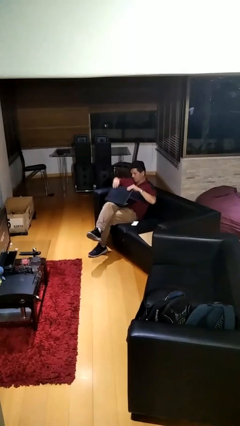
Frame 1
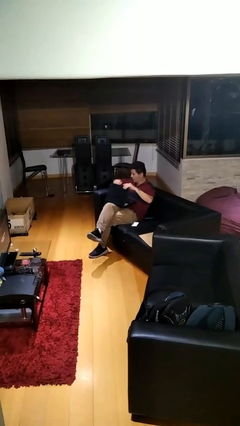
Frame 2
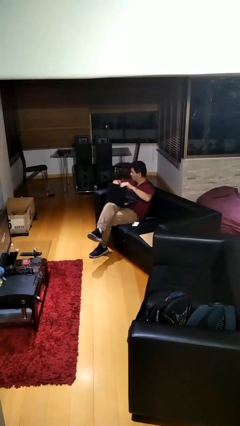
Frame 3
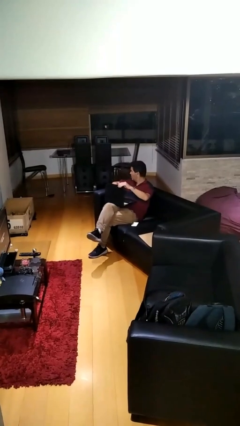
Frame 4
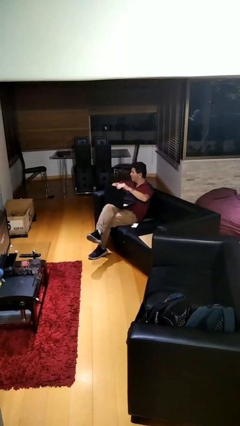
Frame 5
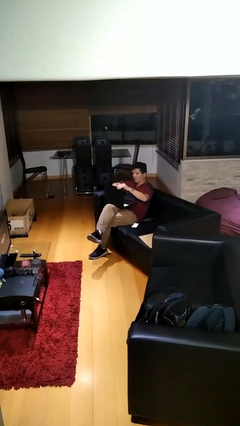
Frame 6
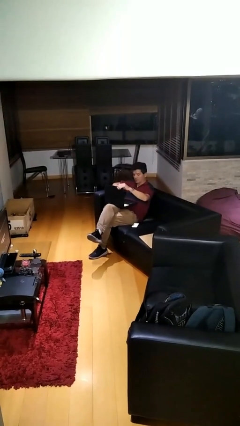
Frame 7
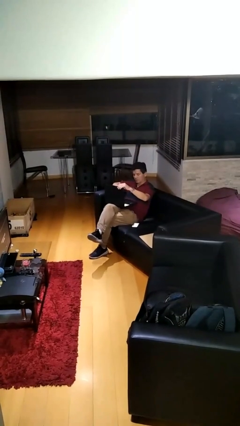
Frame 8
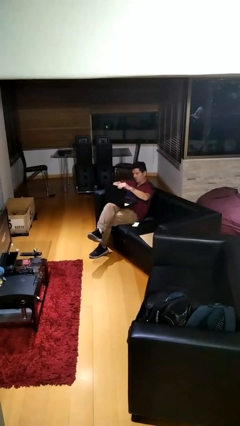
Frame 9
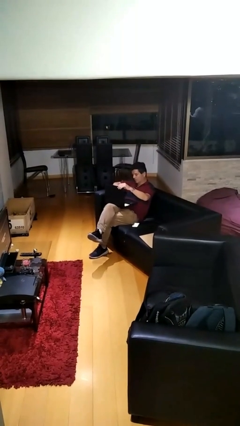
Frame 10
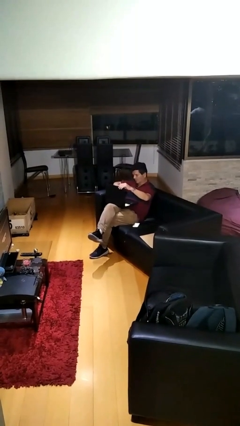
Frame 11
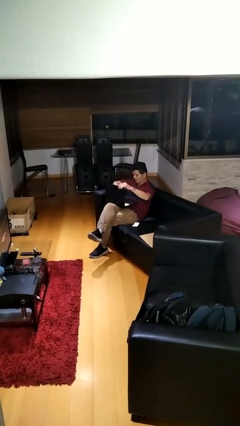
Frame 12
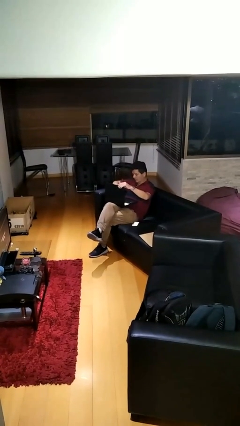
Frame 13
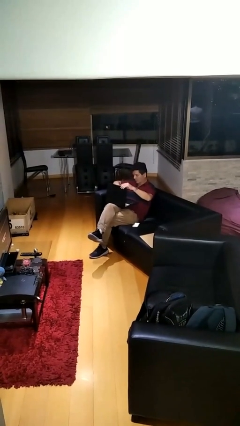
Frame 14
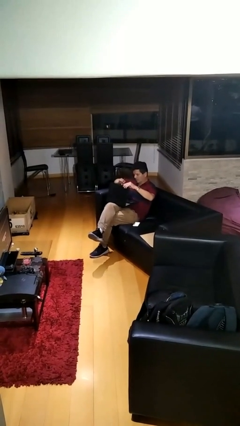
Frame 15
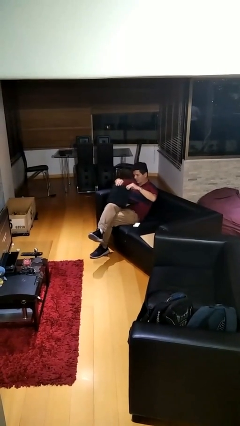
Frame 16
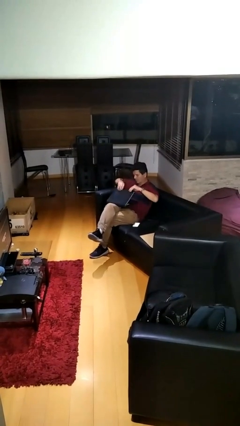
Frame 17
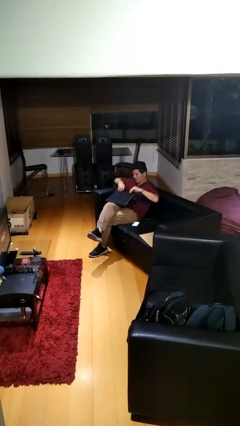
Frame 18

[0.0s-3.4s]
person interacts with laptop

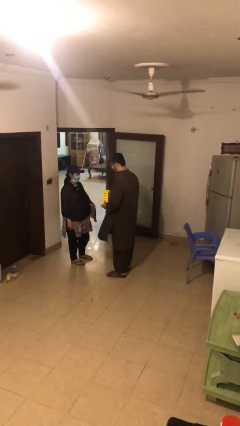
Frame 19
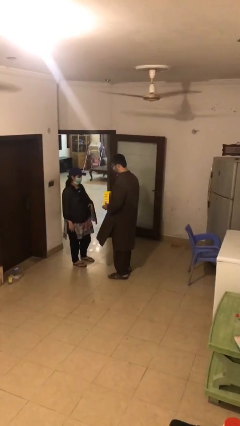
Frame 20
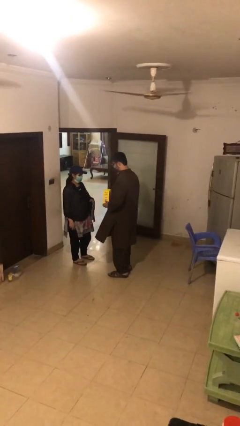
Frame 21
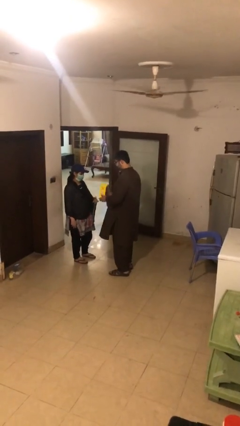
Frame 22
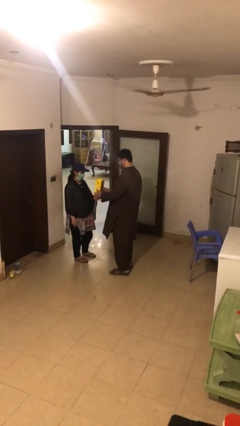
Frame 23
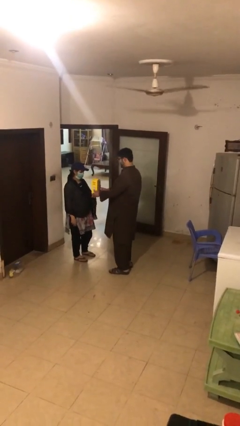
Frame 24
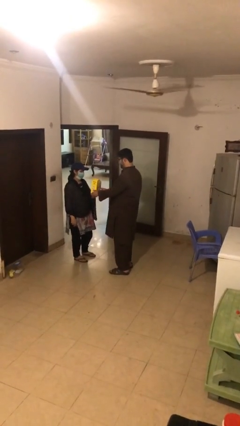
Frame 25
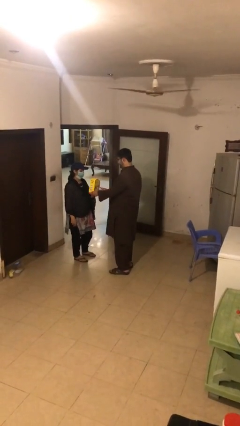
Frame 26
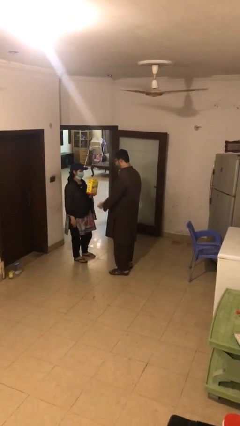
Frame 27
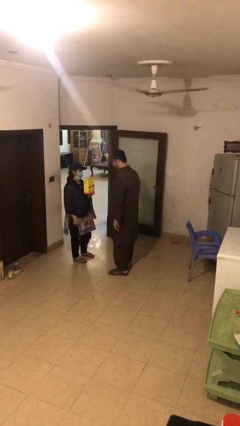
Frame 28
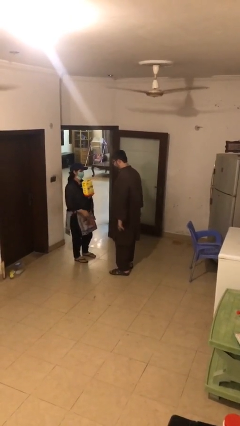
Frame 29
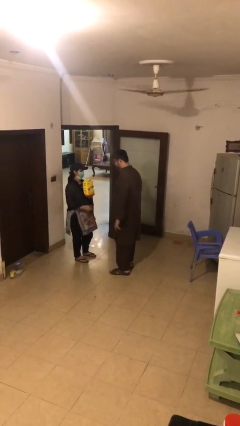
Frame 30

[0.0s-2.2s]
person transfers object to person

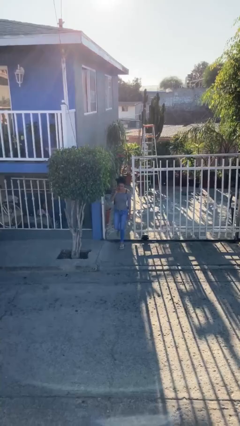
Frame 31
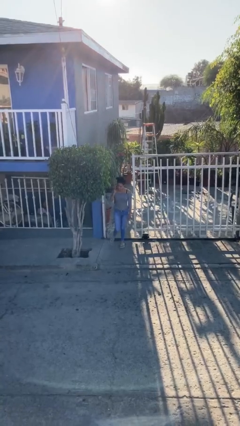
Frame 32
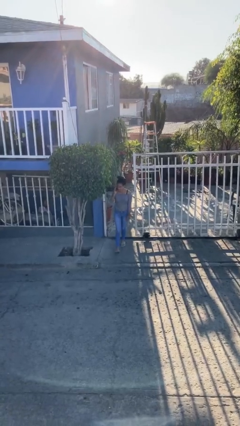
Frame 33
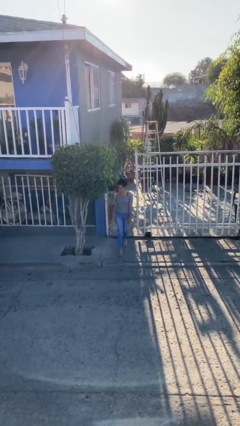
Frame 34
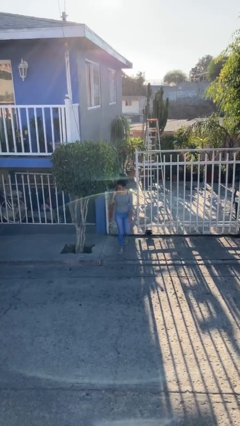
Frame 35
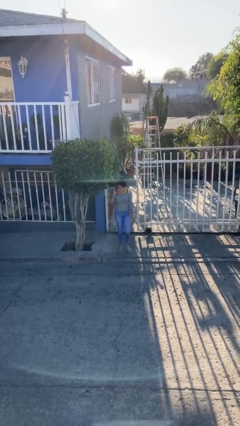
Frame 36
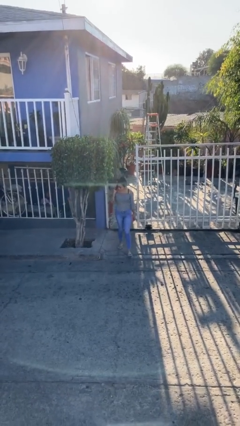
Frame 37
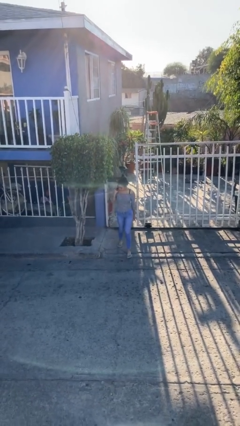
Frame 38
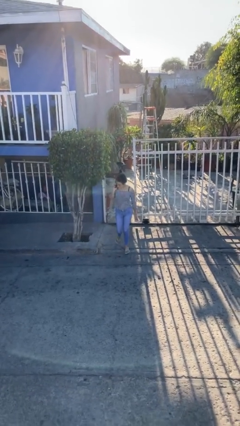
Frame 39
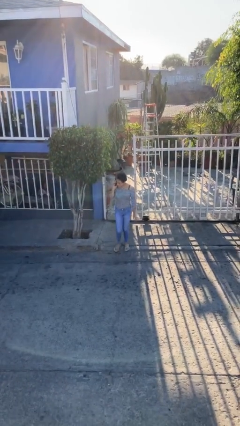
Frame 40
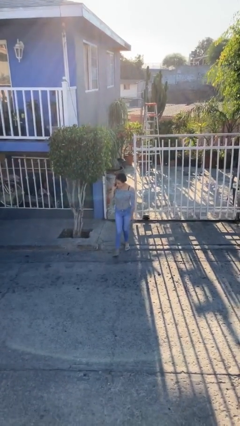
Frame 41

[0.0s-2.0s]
person enters scene through structure

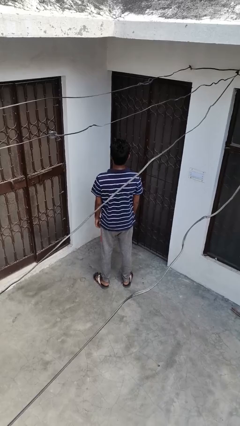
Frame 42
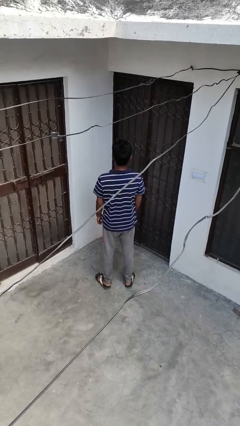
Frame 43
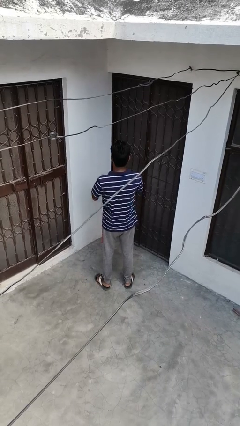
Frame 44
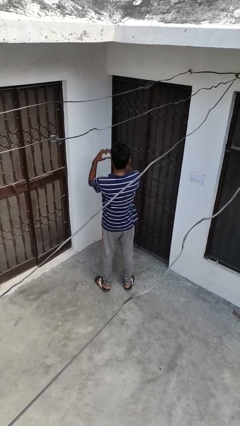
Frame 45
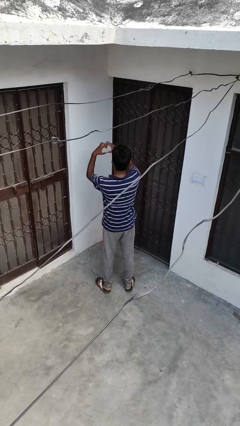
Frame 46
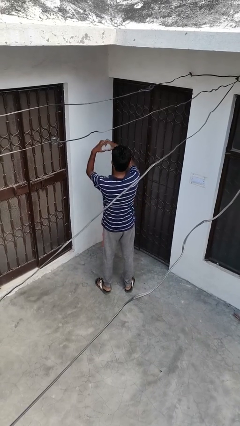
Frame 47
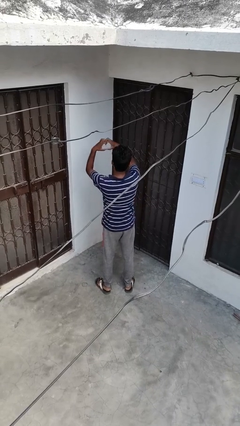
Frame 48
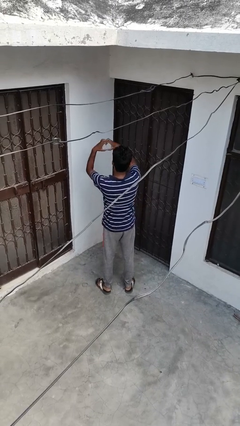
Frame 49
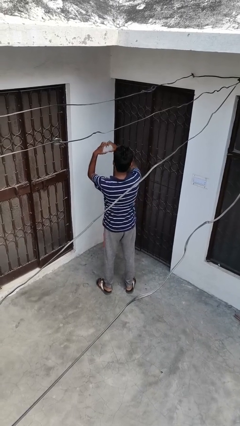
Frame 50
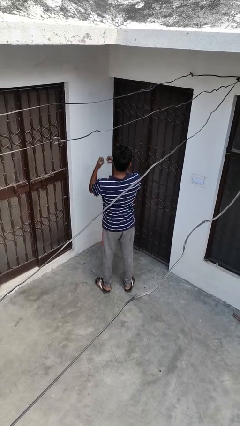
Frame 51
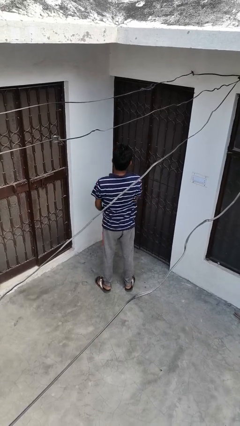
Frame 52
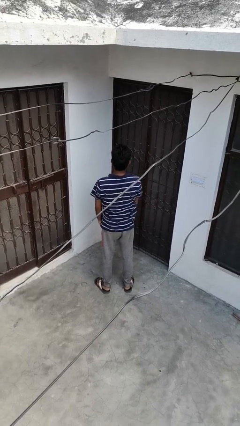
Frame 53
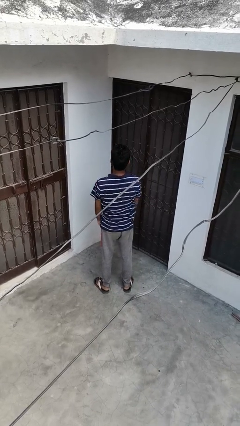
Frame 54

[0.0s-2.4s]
person gestures heart

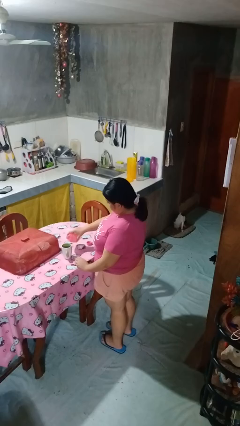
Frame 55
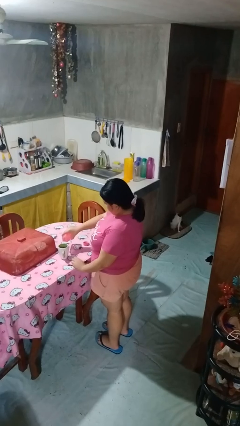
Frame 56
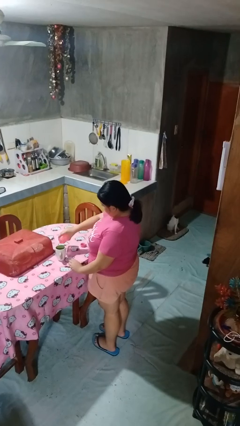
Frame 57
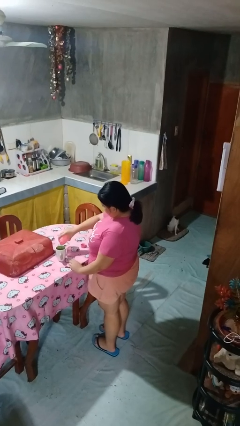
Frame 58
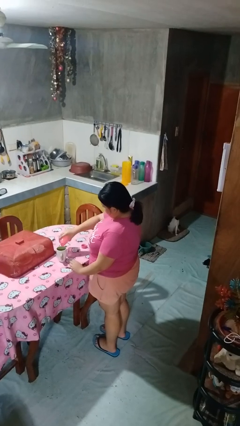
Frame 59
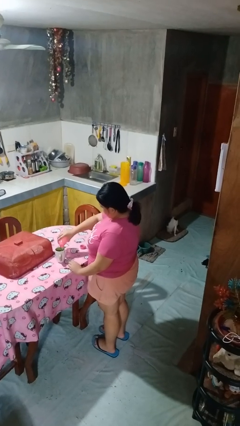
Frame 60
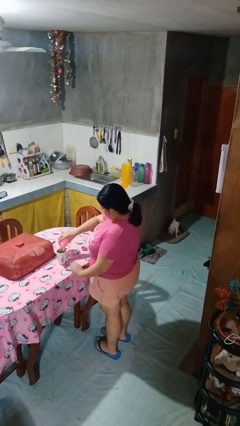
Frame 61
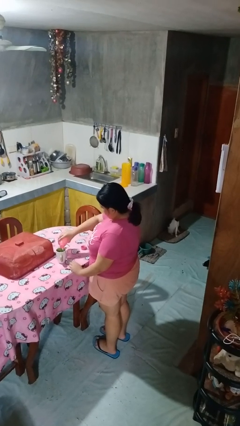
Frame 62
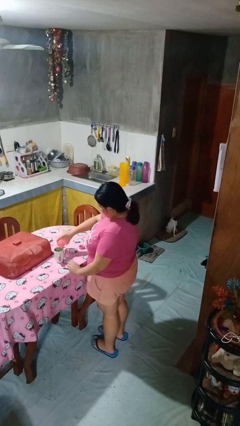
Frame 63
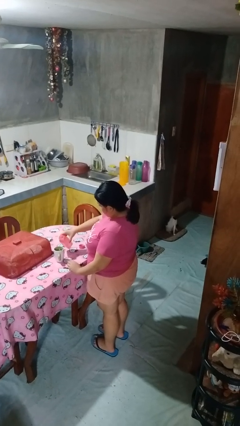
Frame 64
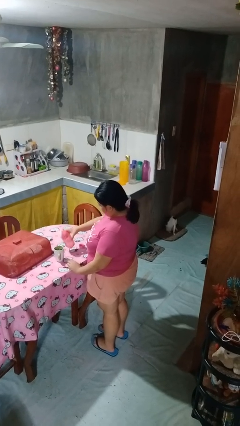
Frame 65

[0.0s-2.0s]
person pours liquid into cup

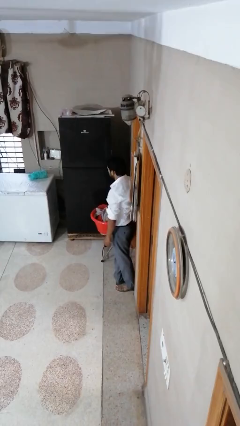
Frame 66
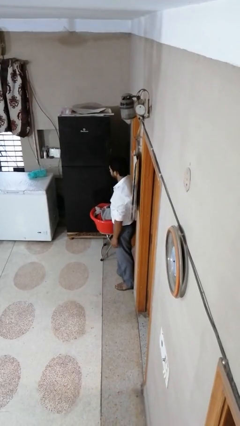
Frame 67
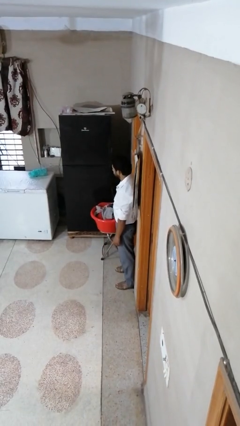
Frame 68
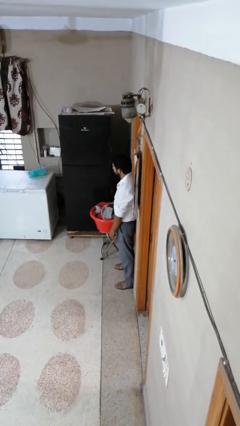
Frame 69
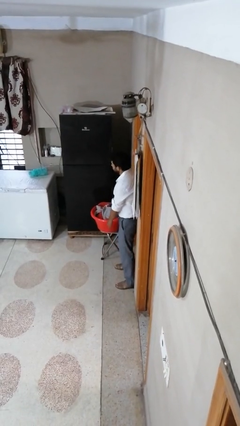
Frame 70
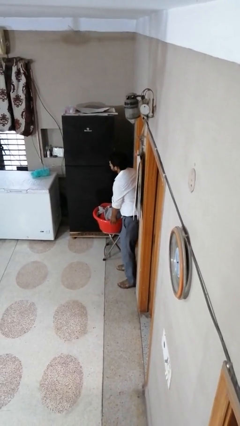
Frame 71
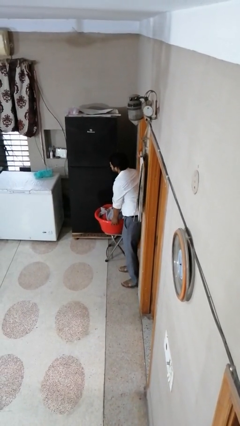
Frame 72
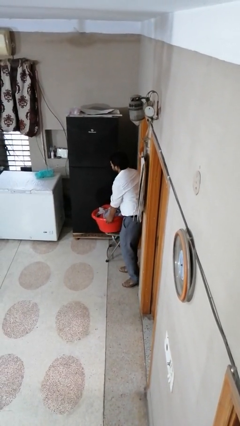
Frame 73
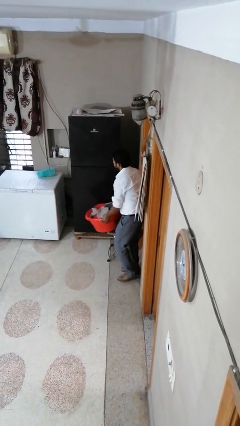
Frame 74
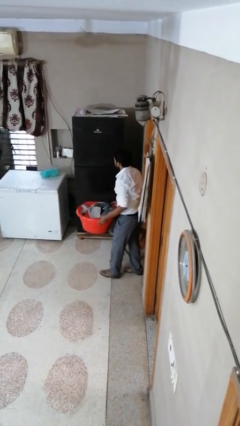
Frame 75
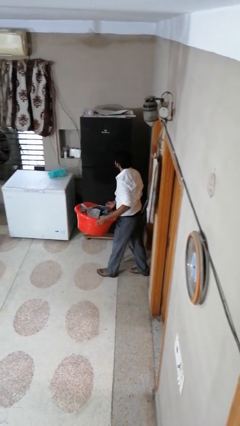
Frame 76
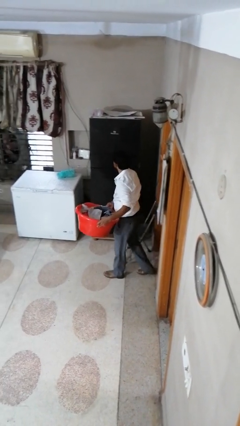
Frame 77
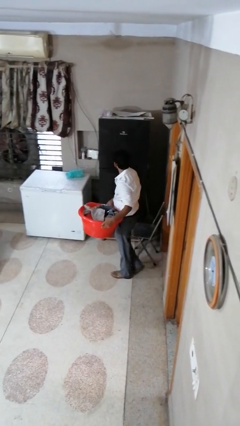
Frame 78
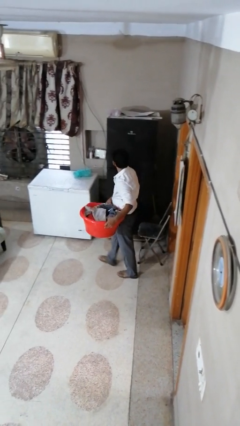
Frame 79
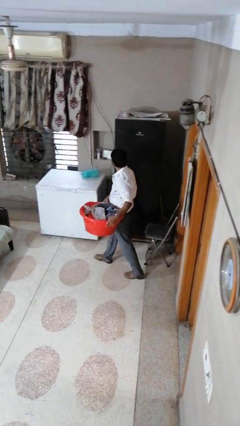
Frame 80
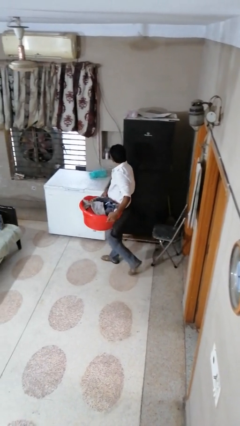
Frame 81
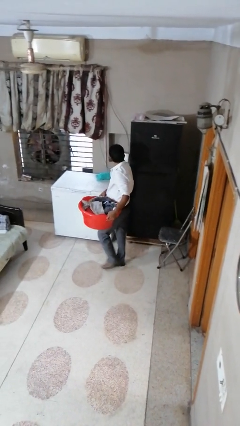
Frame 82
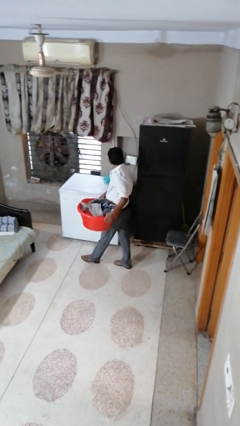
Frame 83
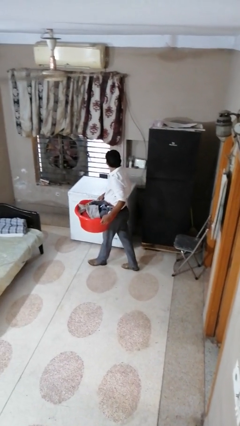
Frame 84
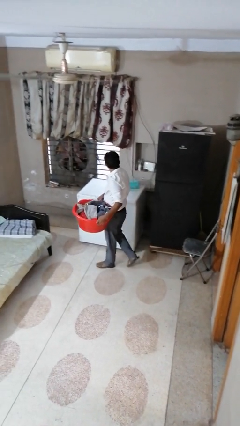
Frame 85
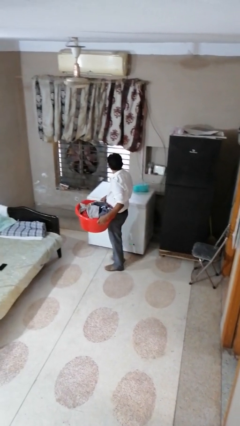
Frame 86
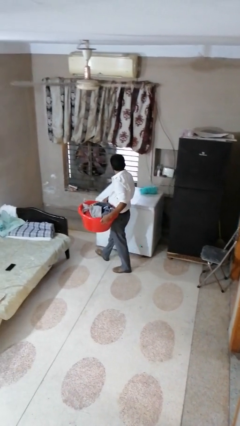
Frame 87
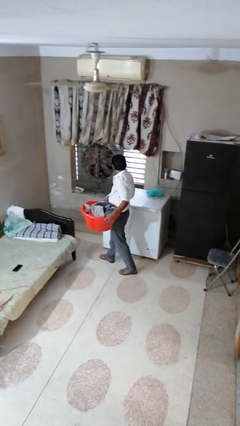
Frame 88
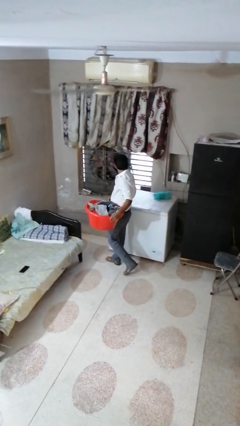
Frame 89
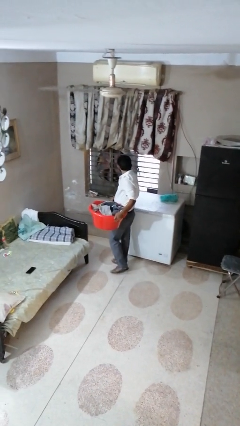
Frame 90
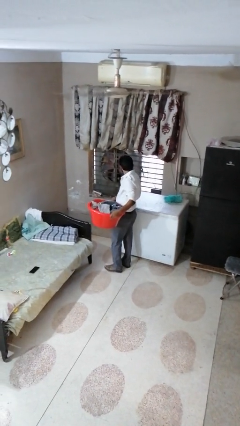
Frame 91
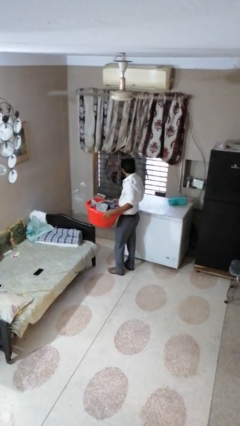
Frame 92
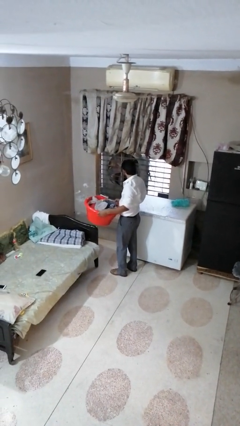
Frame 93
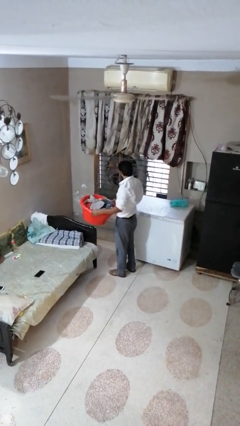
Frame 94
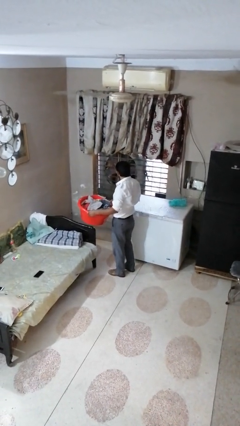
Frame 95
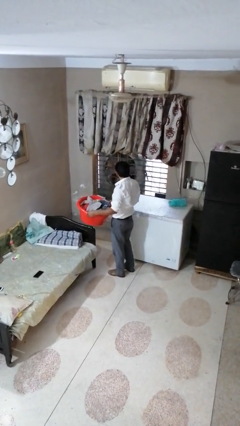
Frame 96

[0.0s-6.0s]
person carries laundry basket
